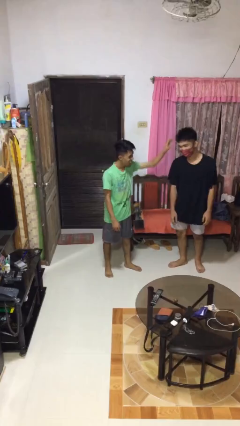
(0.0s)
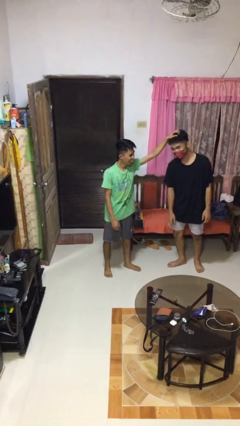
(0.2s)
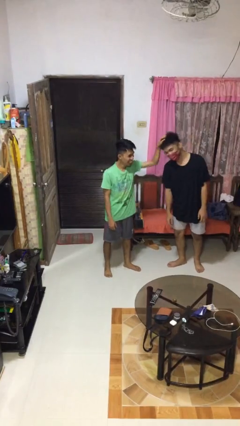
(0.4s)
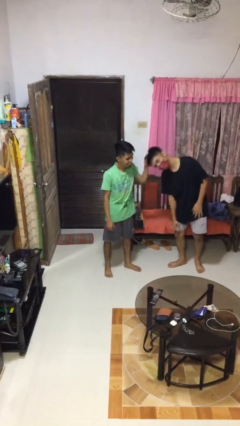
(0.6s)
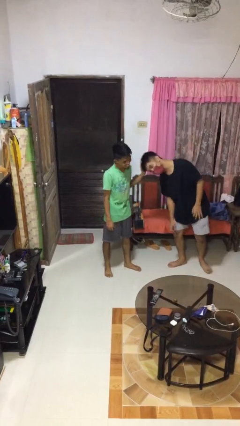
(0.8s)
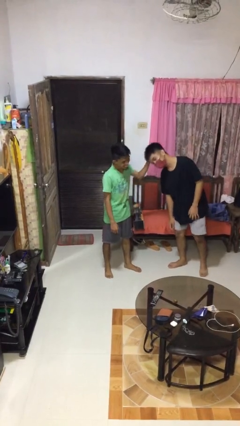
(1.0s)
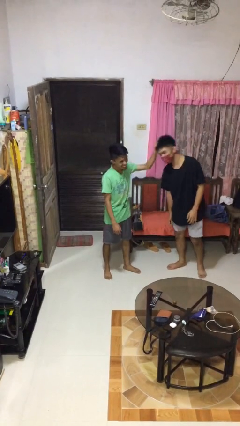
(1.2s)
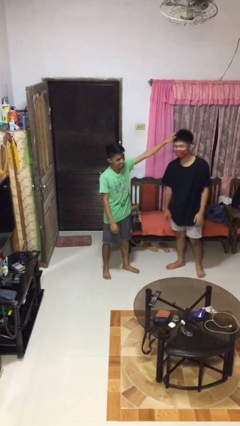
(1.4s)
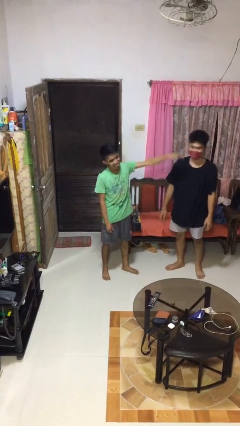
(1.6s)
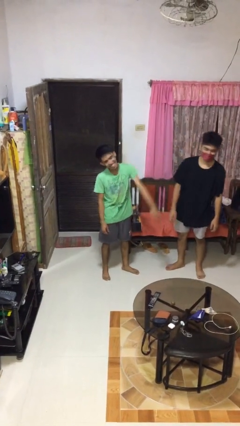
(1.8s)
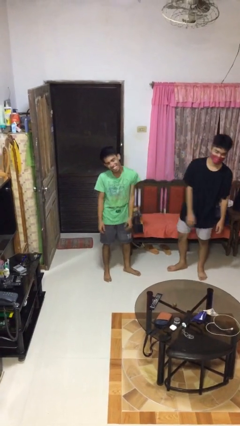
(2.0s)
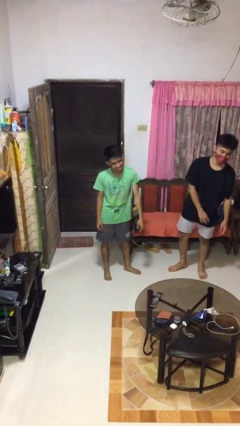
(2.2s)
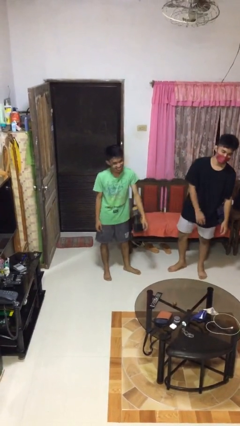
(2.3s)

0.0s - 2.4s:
person grabs person by hair

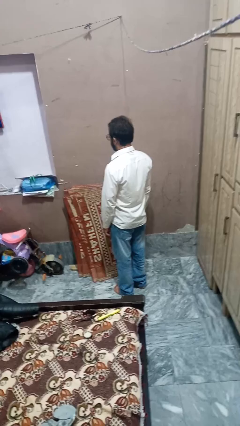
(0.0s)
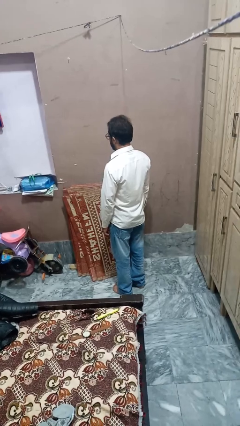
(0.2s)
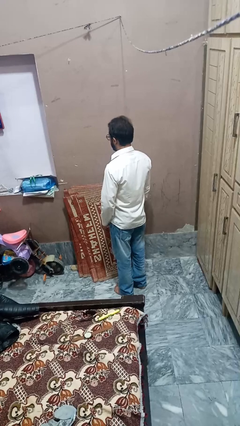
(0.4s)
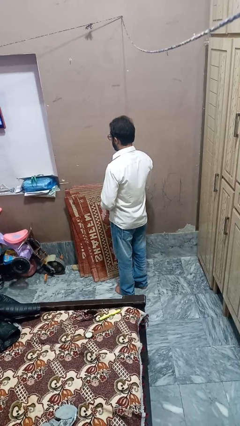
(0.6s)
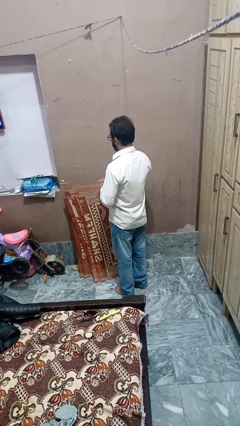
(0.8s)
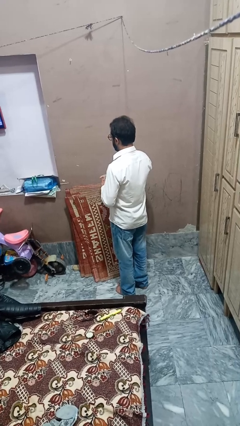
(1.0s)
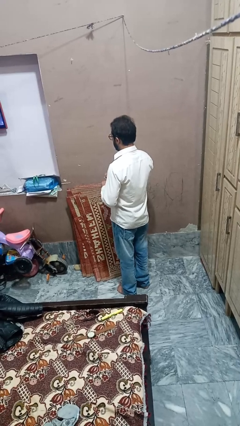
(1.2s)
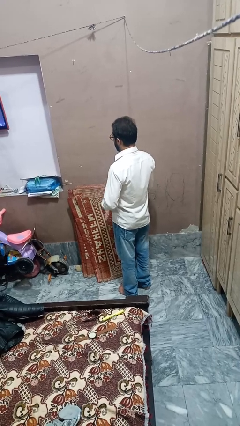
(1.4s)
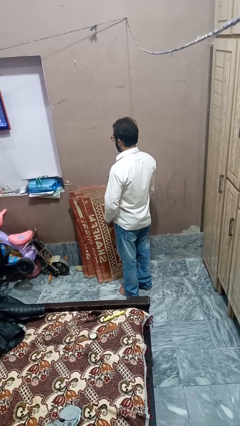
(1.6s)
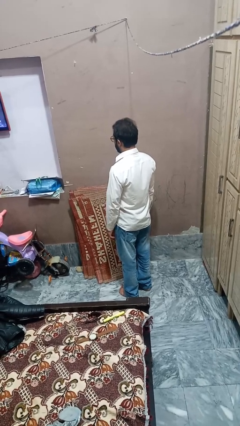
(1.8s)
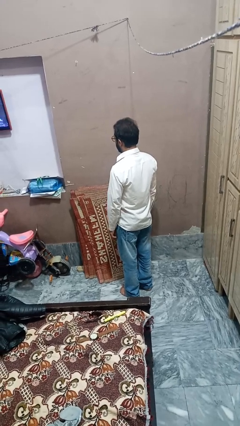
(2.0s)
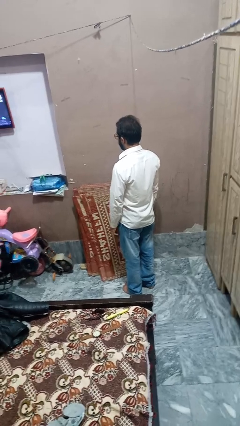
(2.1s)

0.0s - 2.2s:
person takes off ring

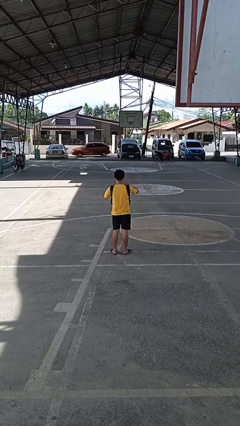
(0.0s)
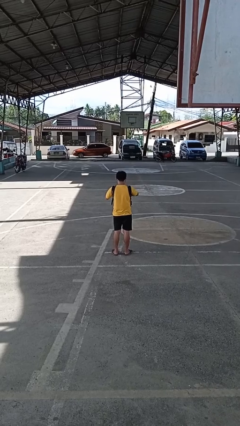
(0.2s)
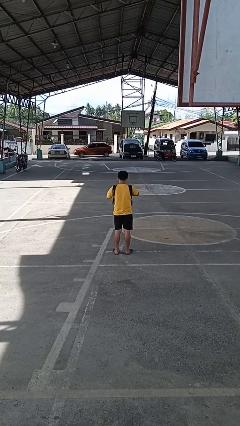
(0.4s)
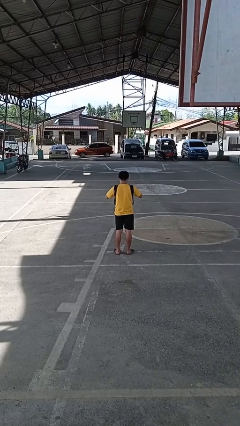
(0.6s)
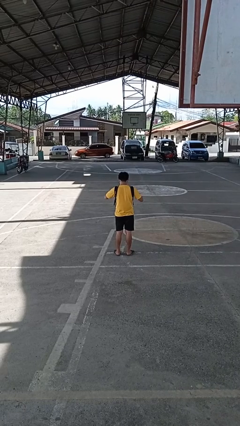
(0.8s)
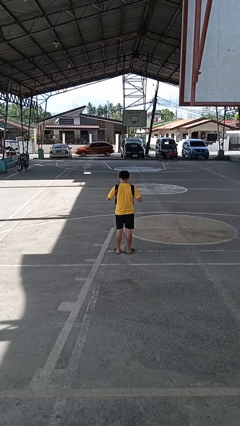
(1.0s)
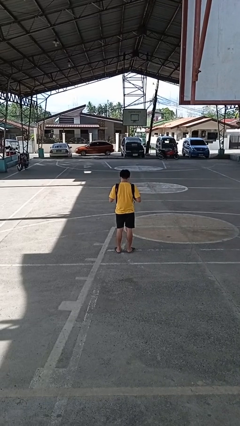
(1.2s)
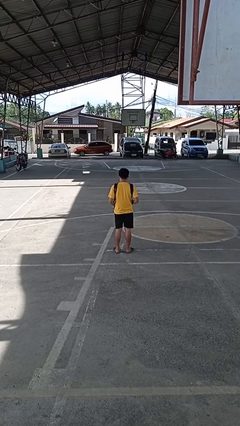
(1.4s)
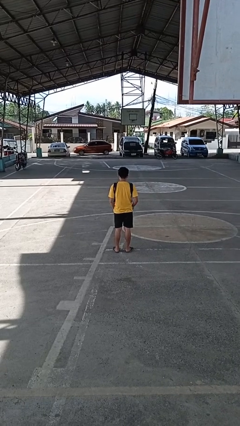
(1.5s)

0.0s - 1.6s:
person puts object into backpack

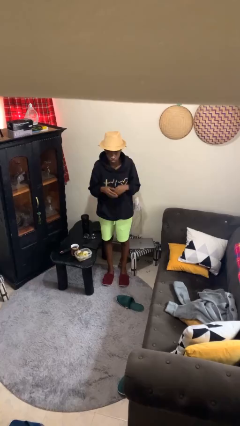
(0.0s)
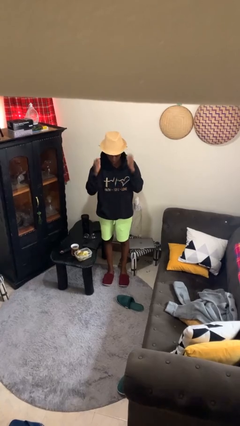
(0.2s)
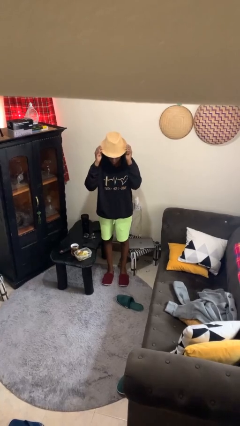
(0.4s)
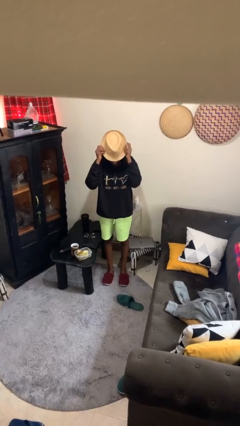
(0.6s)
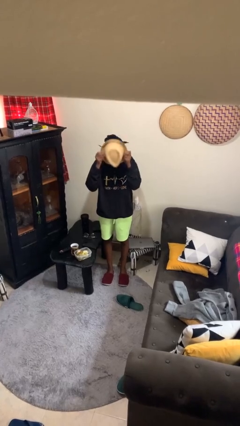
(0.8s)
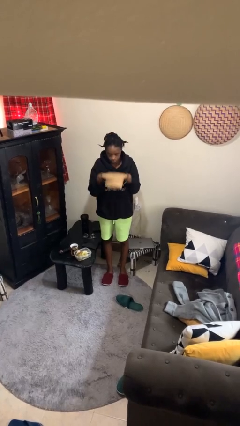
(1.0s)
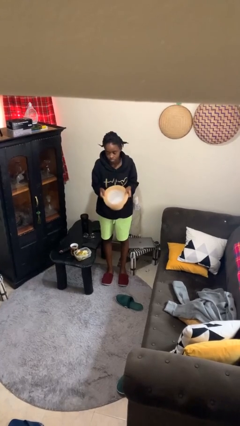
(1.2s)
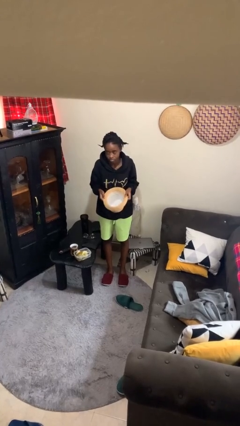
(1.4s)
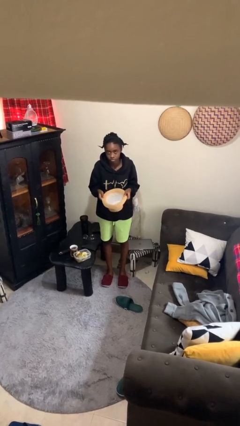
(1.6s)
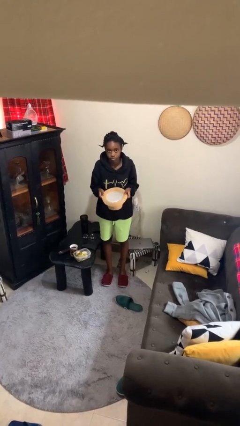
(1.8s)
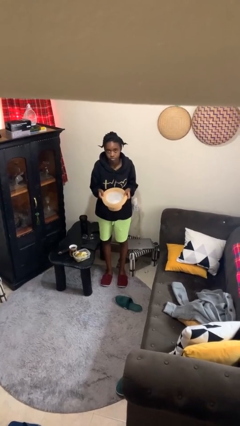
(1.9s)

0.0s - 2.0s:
person takes off hat

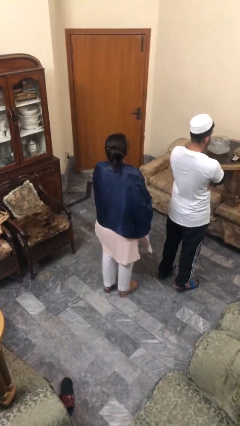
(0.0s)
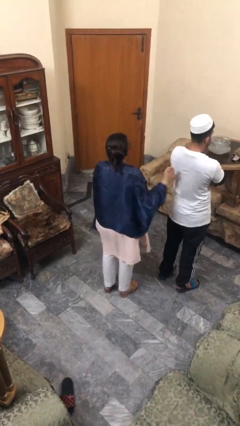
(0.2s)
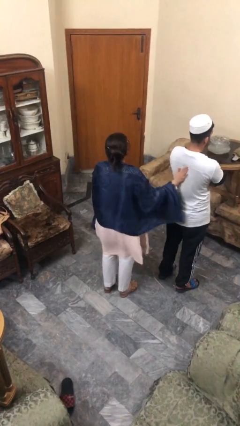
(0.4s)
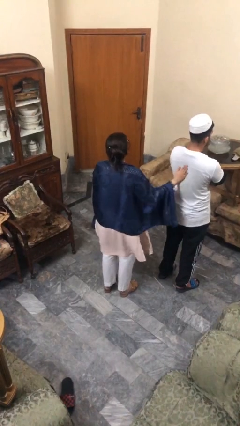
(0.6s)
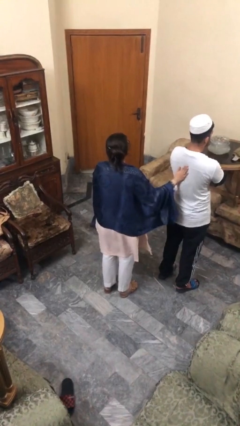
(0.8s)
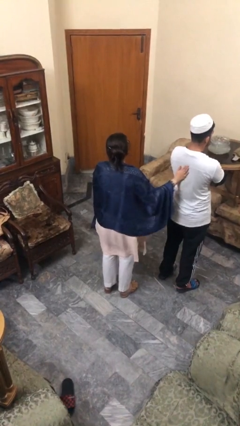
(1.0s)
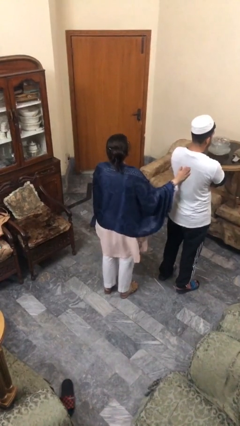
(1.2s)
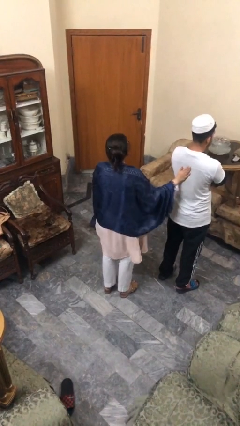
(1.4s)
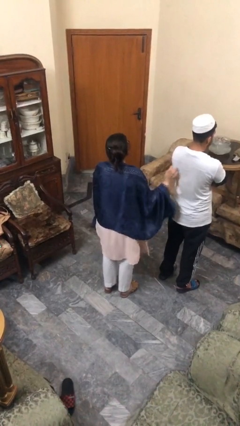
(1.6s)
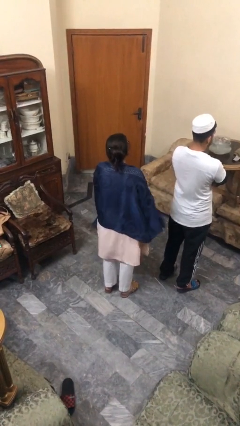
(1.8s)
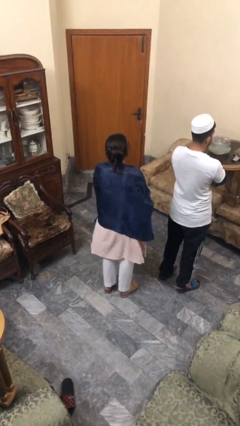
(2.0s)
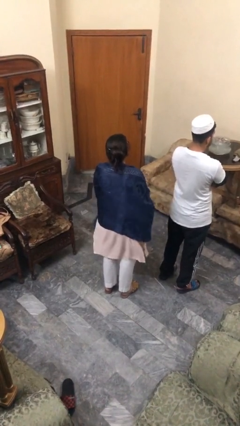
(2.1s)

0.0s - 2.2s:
person touches back of person

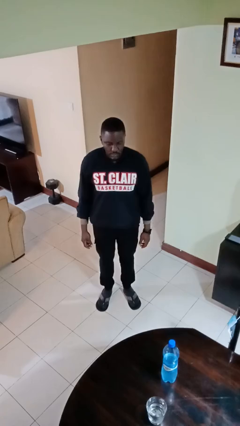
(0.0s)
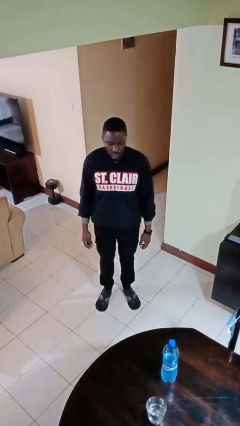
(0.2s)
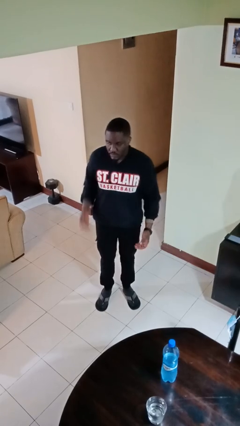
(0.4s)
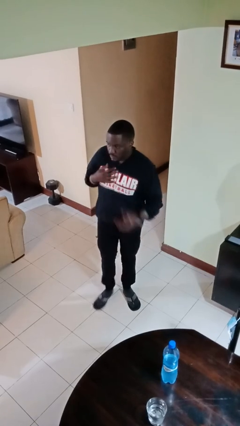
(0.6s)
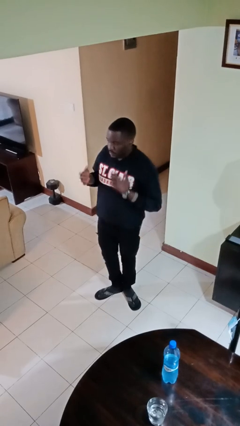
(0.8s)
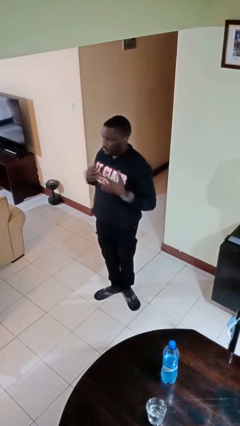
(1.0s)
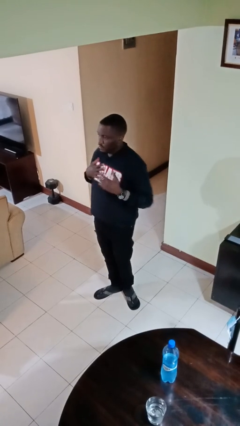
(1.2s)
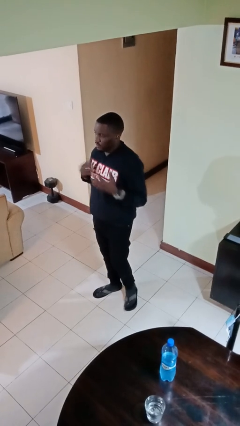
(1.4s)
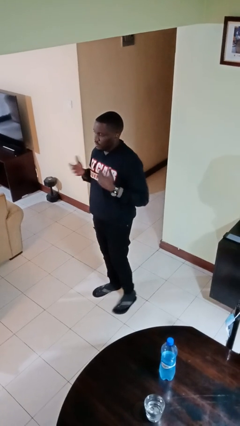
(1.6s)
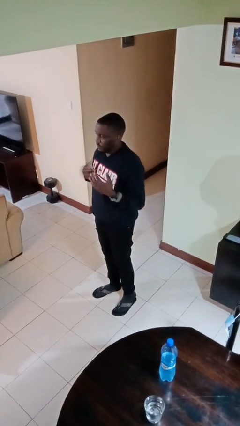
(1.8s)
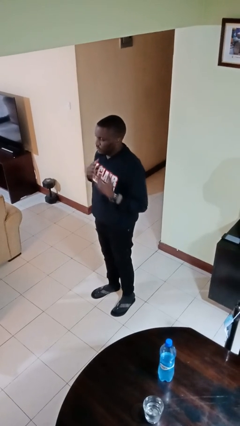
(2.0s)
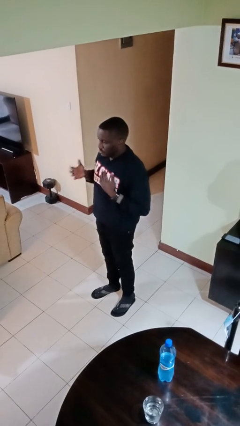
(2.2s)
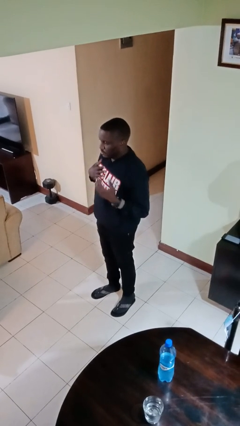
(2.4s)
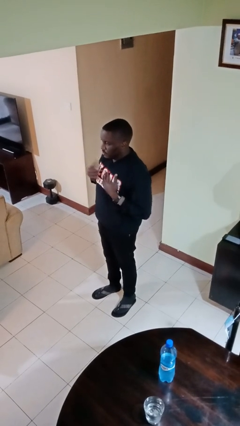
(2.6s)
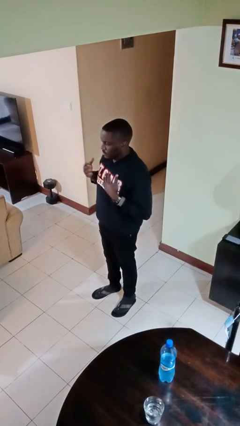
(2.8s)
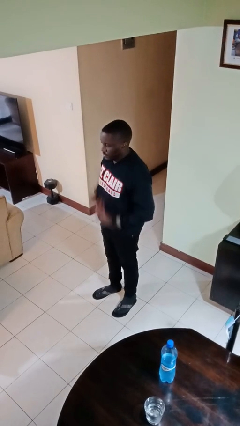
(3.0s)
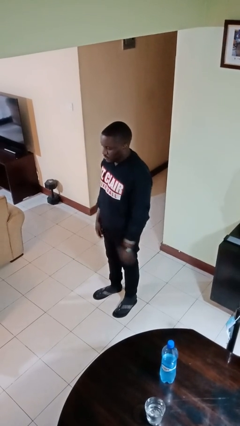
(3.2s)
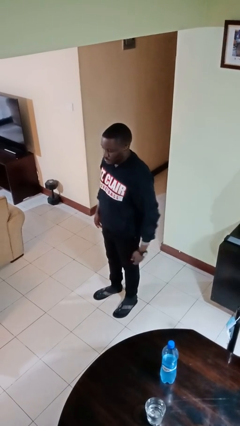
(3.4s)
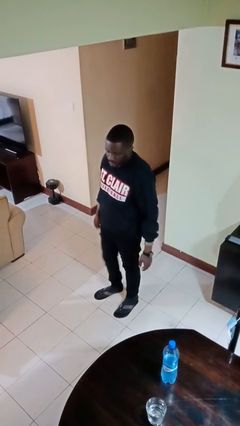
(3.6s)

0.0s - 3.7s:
person drums on chest

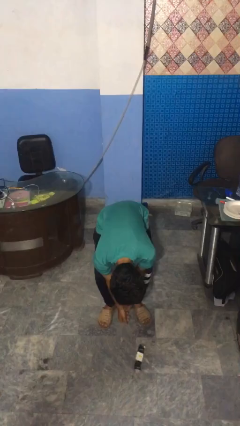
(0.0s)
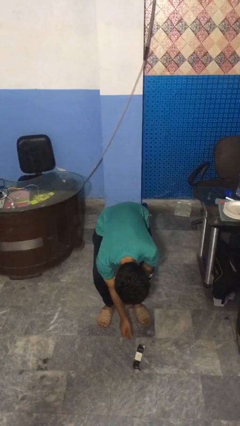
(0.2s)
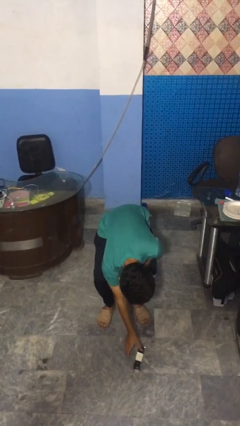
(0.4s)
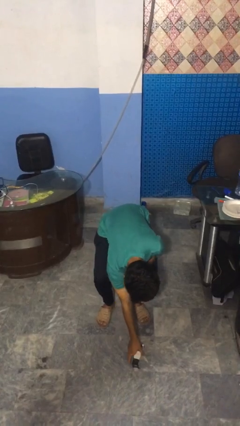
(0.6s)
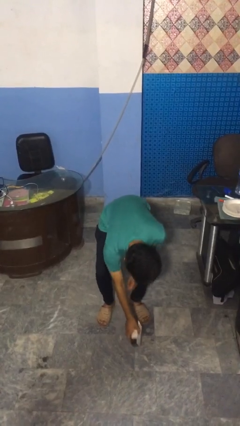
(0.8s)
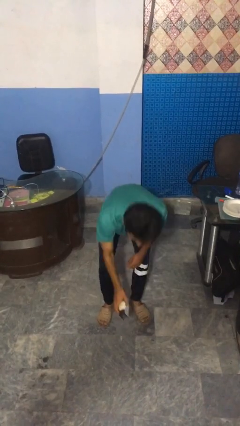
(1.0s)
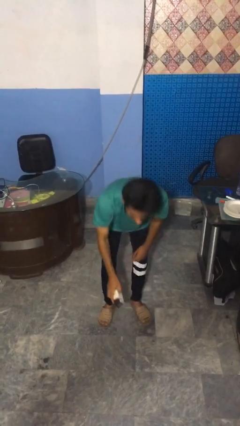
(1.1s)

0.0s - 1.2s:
person catches dropped object

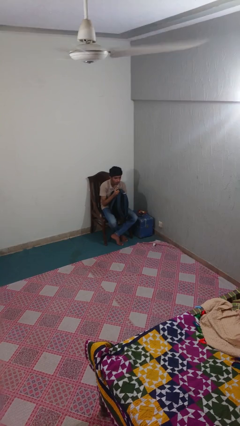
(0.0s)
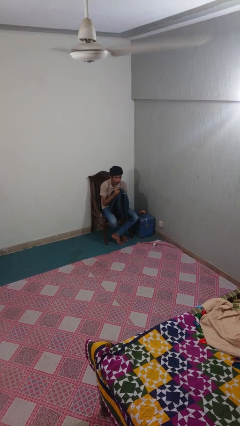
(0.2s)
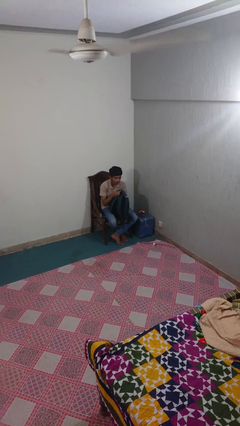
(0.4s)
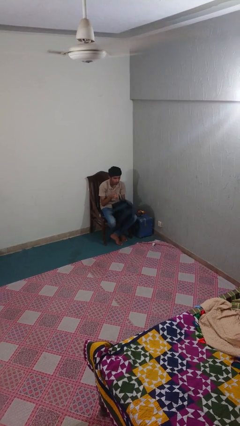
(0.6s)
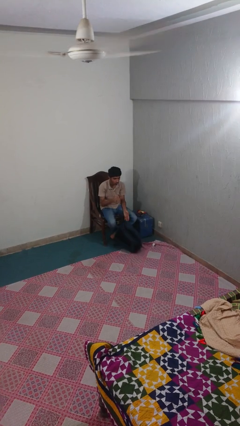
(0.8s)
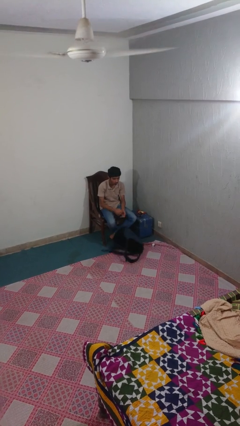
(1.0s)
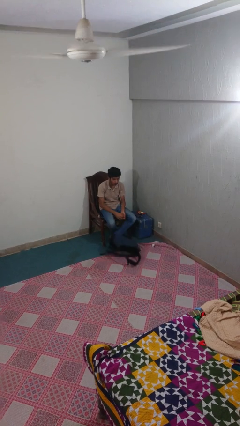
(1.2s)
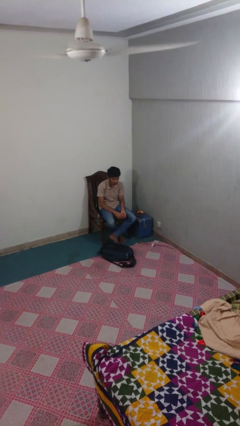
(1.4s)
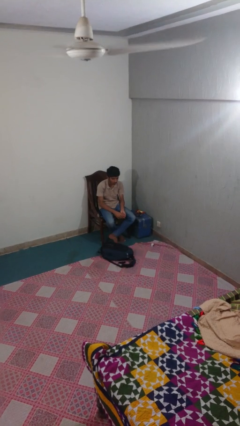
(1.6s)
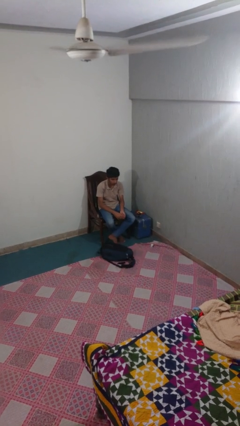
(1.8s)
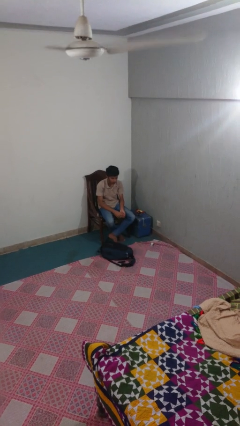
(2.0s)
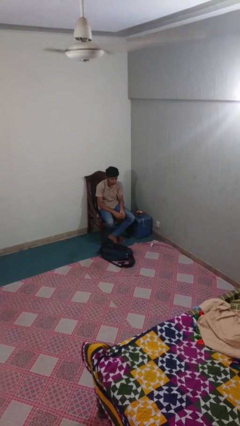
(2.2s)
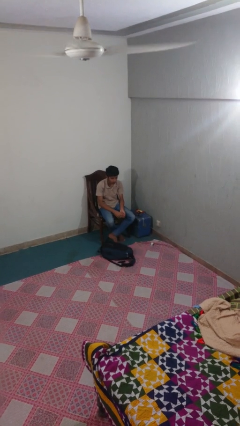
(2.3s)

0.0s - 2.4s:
person drops object
